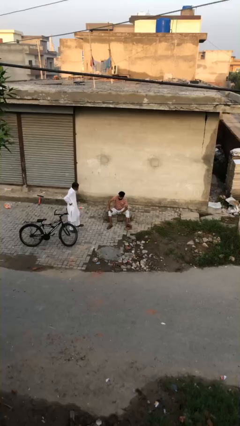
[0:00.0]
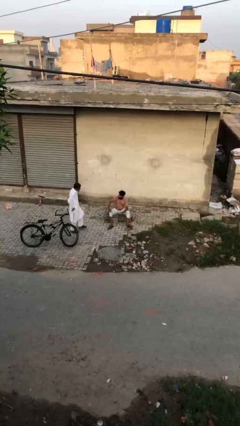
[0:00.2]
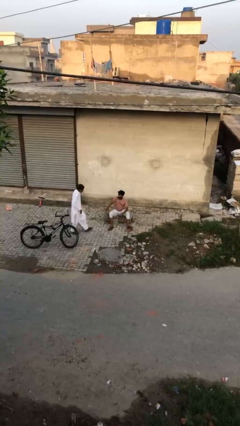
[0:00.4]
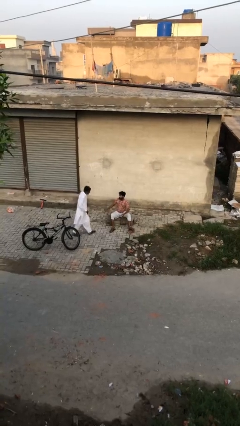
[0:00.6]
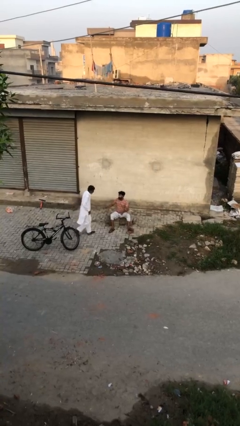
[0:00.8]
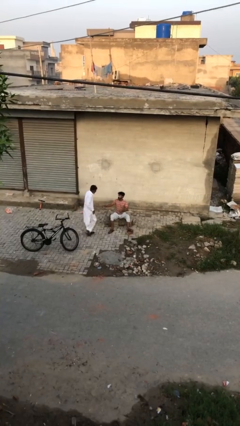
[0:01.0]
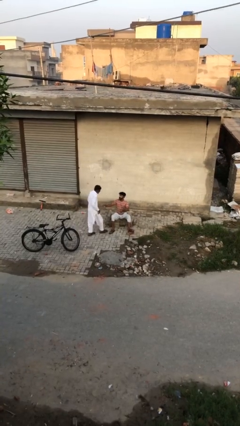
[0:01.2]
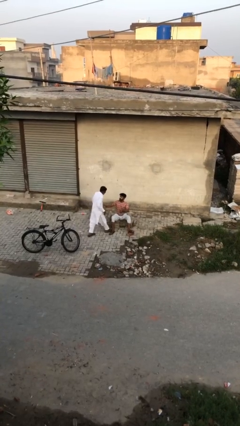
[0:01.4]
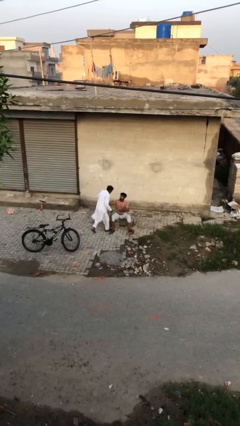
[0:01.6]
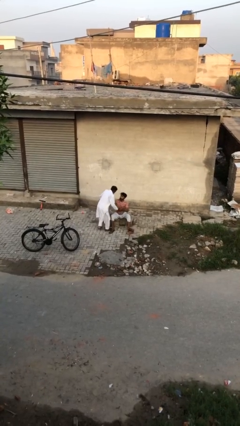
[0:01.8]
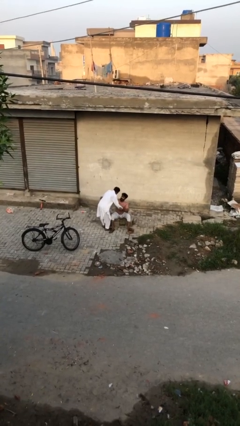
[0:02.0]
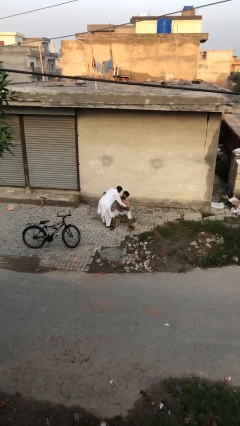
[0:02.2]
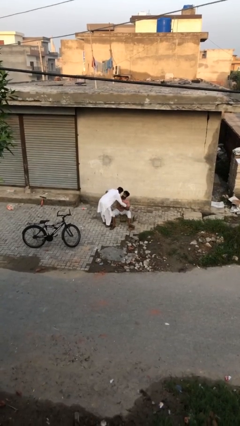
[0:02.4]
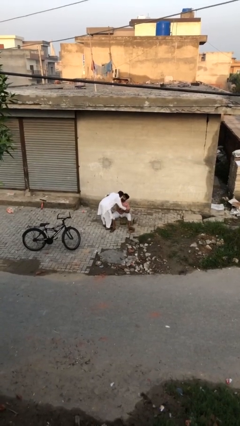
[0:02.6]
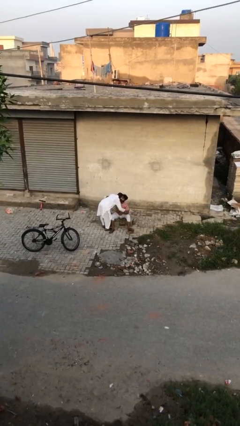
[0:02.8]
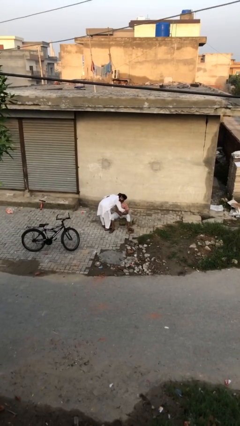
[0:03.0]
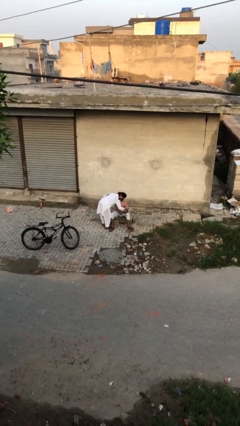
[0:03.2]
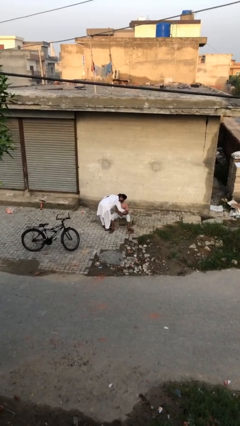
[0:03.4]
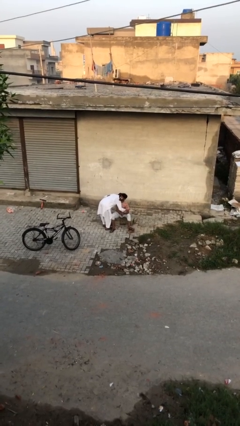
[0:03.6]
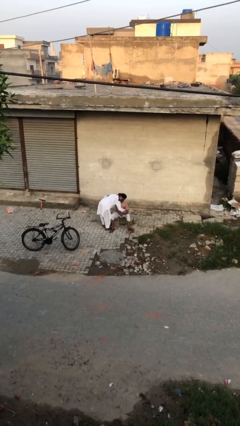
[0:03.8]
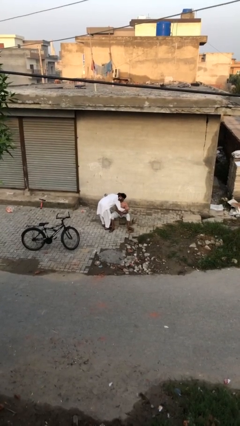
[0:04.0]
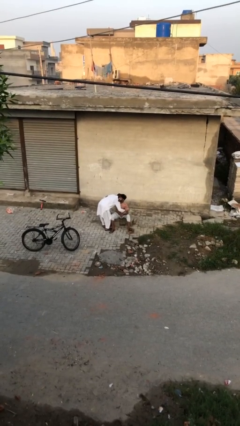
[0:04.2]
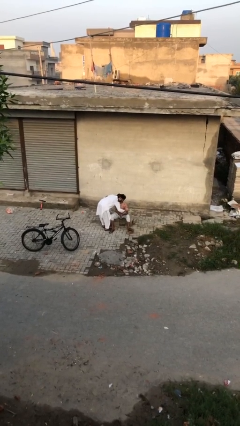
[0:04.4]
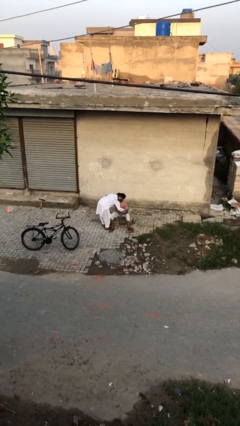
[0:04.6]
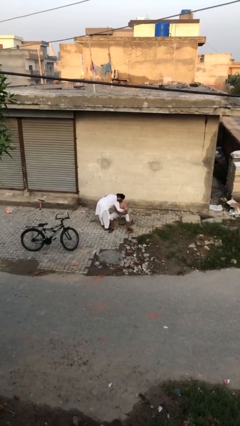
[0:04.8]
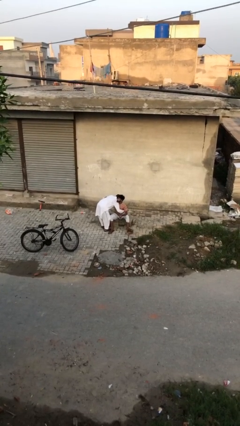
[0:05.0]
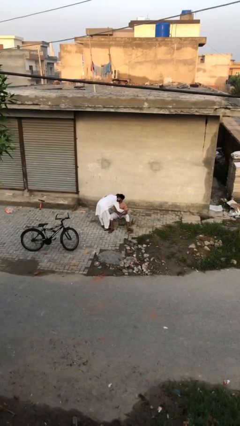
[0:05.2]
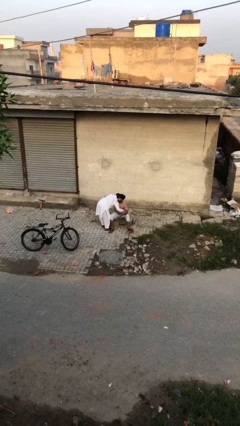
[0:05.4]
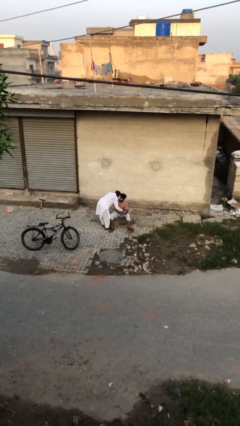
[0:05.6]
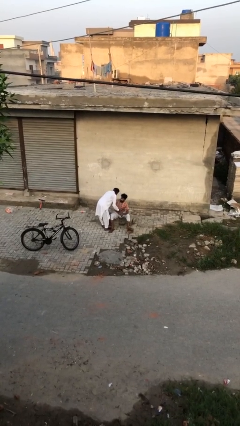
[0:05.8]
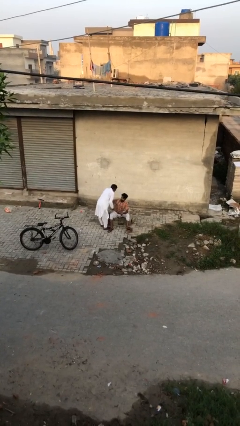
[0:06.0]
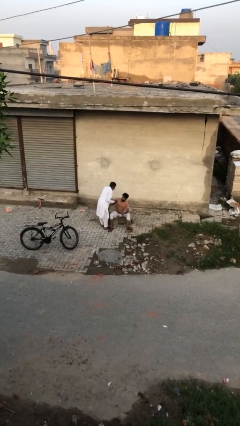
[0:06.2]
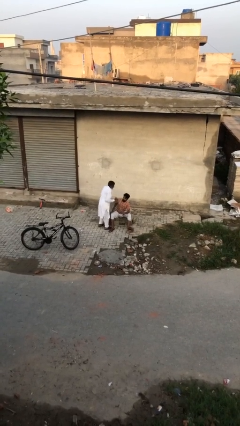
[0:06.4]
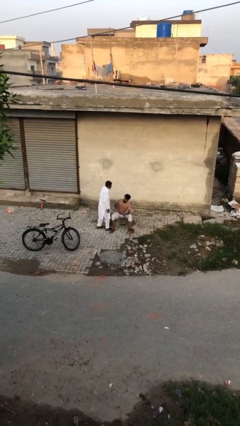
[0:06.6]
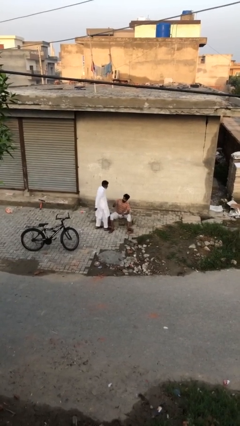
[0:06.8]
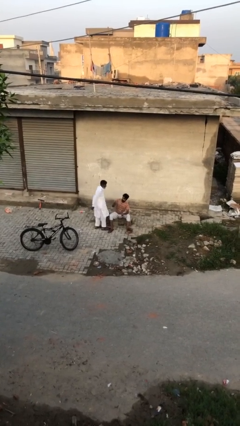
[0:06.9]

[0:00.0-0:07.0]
person embraces person

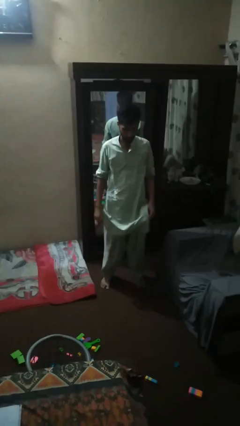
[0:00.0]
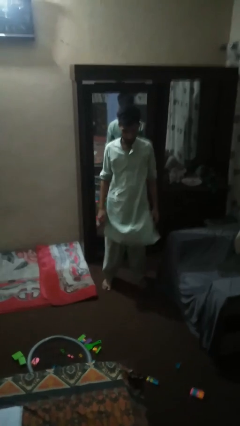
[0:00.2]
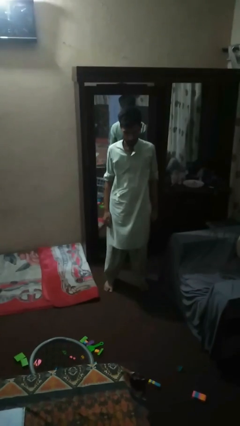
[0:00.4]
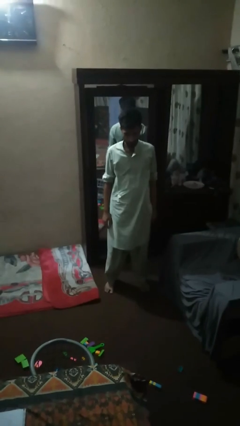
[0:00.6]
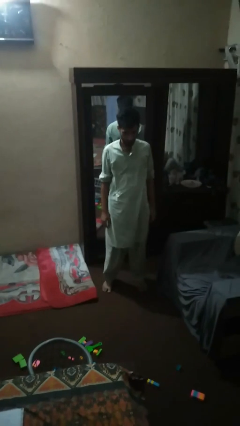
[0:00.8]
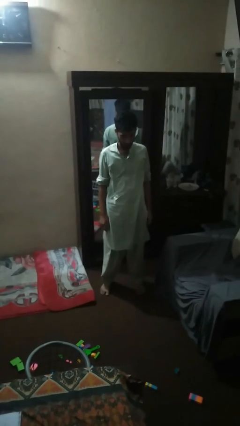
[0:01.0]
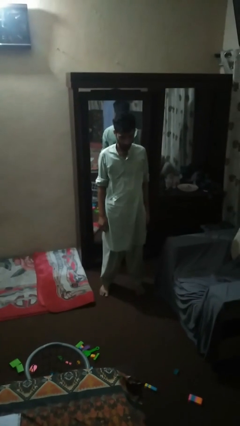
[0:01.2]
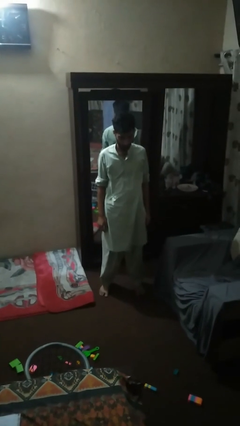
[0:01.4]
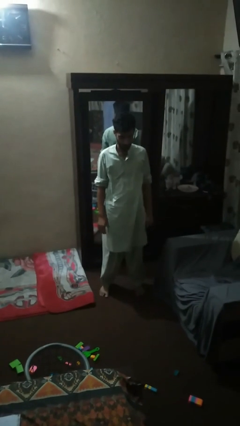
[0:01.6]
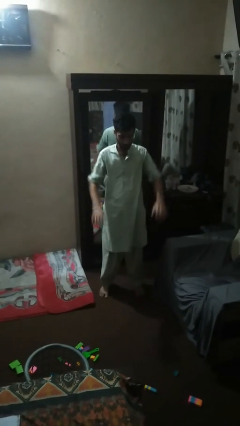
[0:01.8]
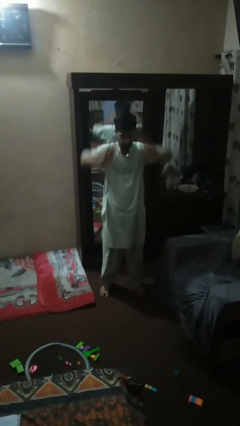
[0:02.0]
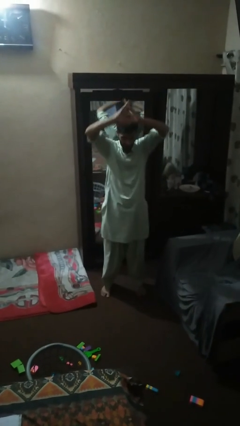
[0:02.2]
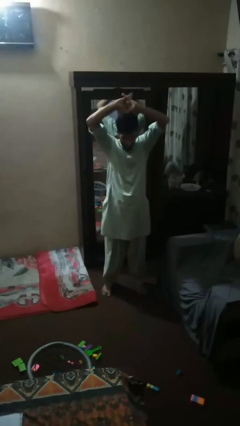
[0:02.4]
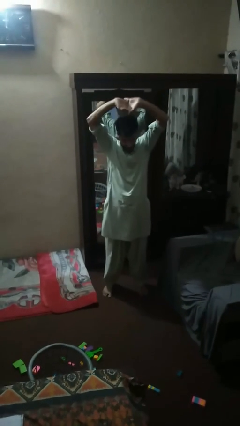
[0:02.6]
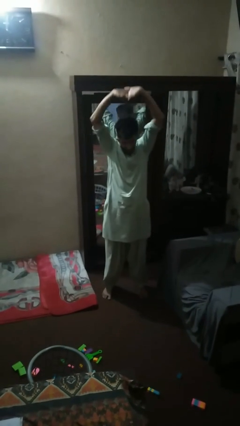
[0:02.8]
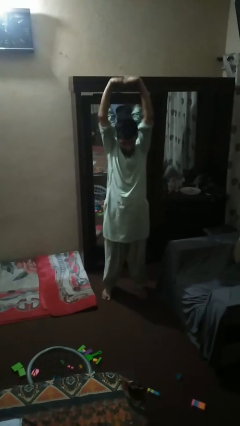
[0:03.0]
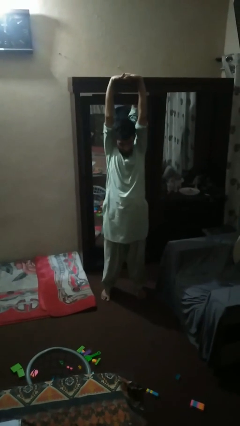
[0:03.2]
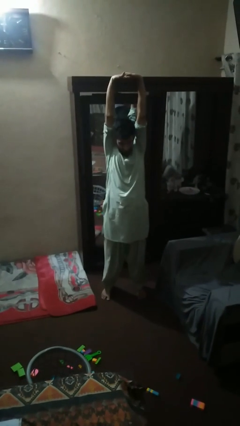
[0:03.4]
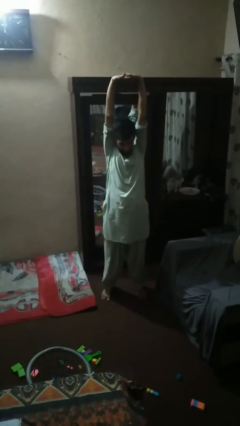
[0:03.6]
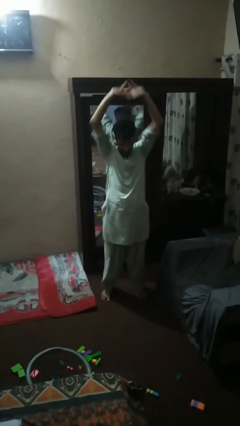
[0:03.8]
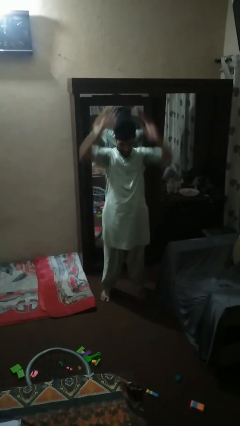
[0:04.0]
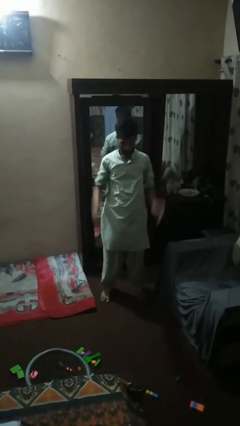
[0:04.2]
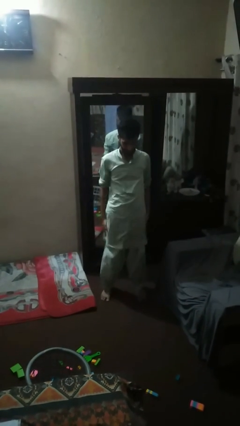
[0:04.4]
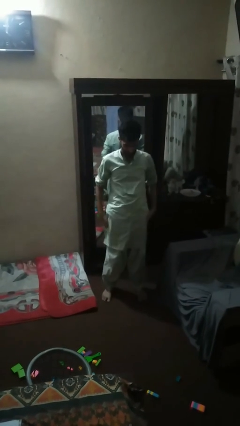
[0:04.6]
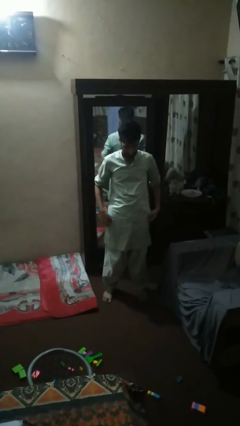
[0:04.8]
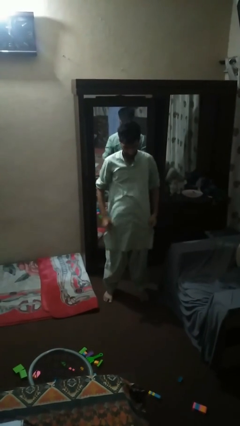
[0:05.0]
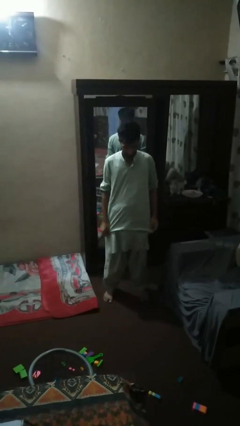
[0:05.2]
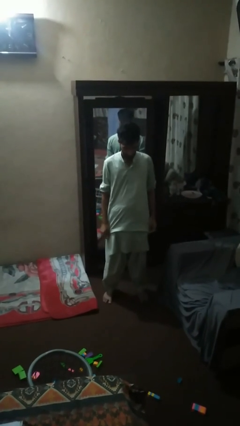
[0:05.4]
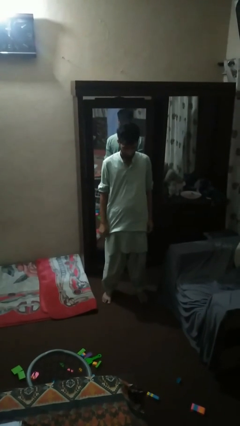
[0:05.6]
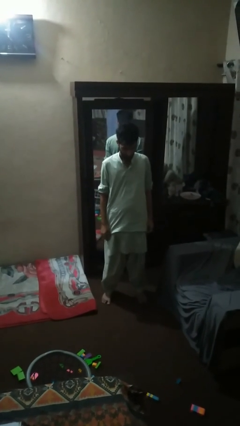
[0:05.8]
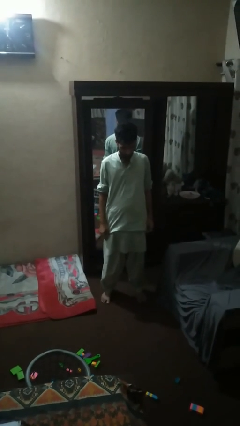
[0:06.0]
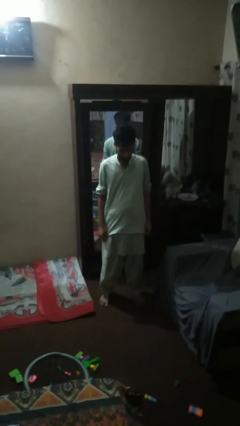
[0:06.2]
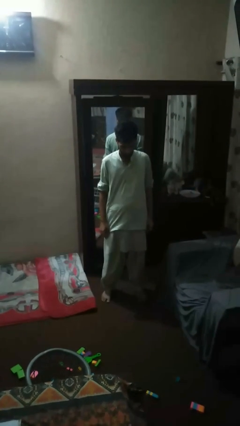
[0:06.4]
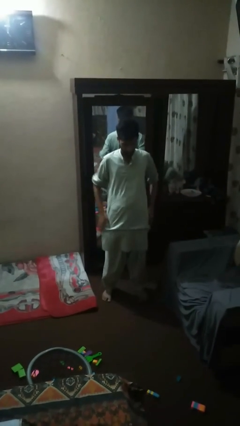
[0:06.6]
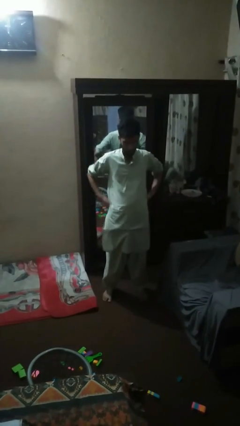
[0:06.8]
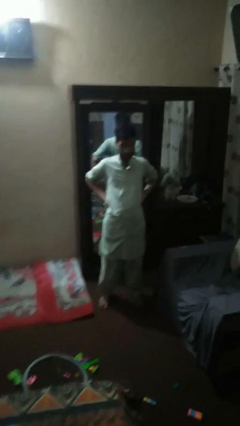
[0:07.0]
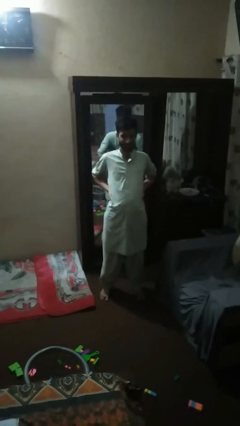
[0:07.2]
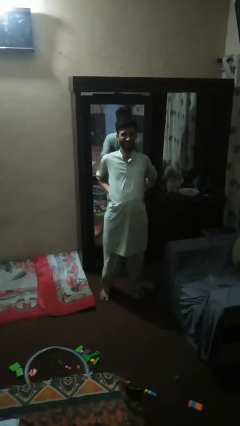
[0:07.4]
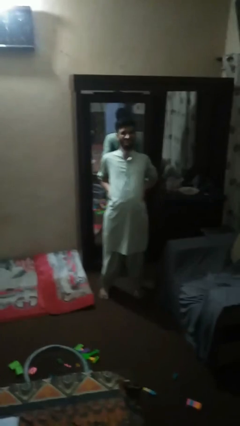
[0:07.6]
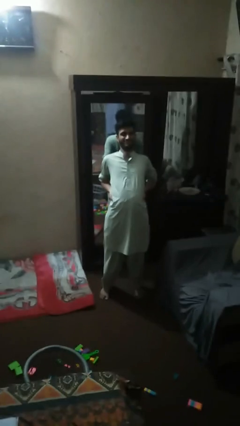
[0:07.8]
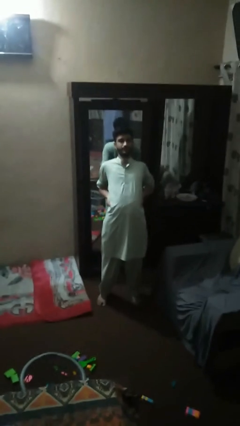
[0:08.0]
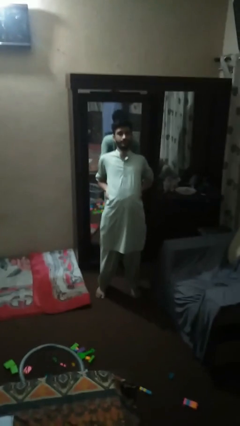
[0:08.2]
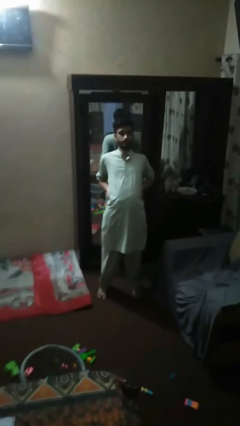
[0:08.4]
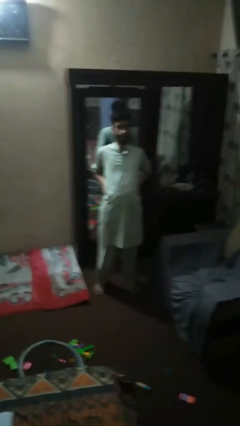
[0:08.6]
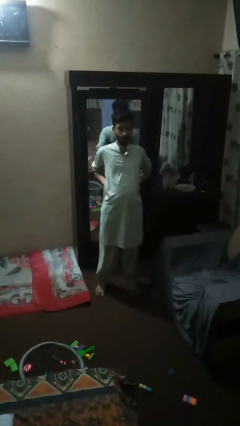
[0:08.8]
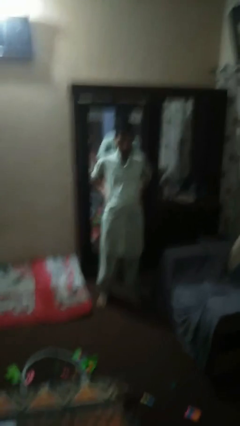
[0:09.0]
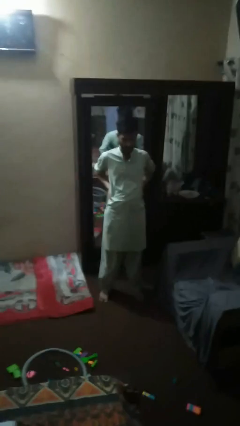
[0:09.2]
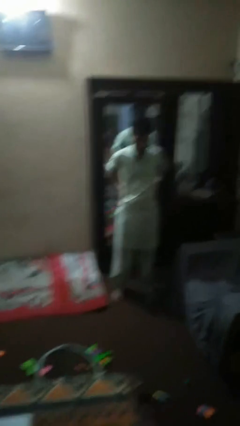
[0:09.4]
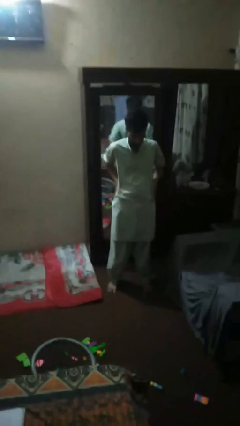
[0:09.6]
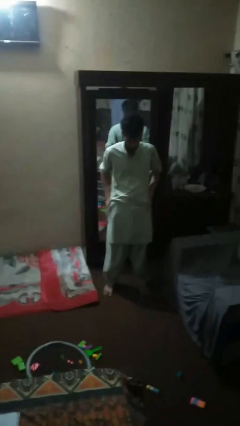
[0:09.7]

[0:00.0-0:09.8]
person stretches arms over head

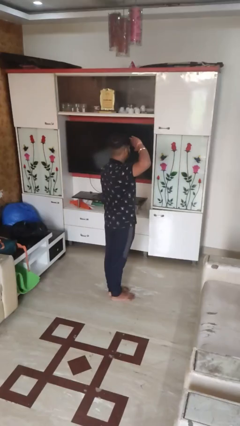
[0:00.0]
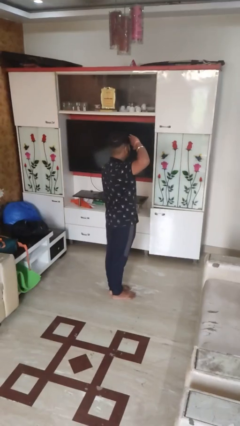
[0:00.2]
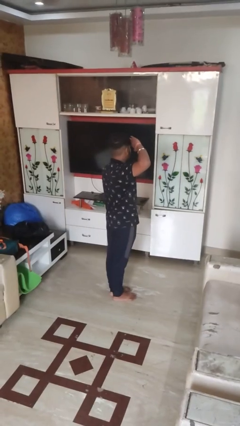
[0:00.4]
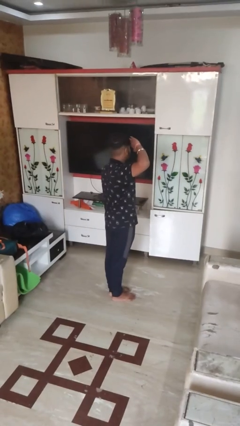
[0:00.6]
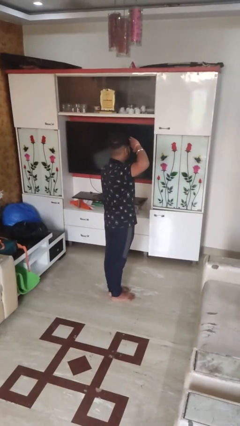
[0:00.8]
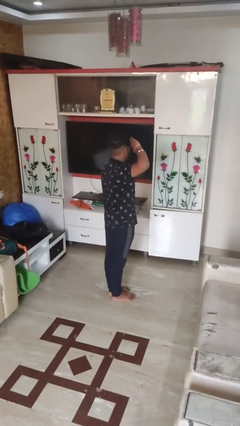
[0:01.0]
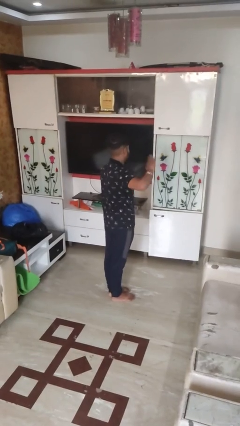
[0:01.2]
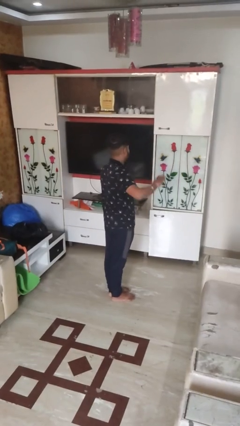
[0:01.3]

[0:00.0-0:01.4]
person salutes
